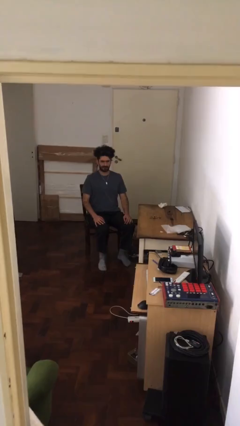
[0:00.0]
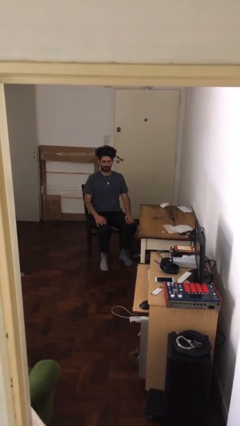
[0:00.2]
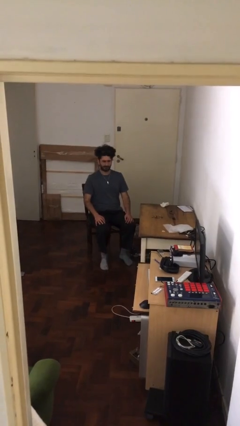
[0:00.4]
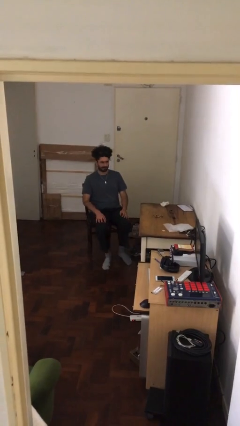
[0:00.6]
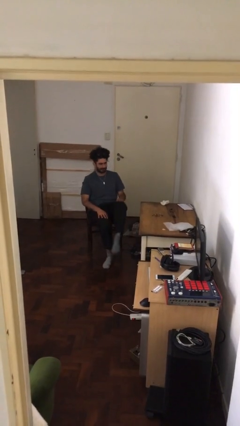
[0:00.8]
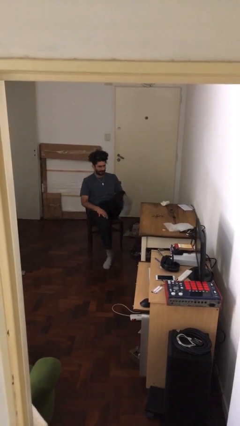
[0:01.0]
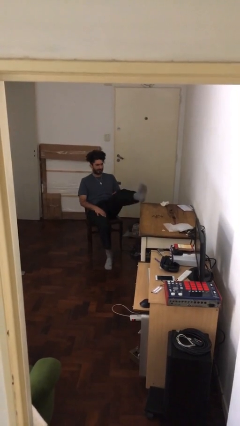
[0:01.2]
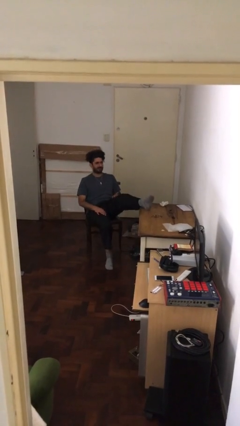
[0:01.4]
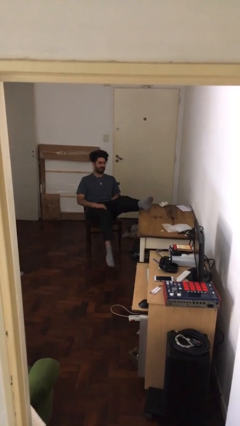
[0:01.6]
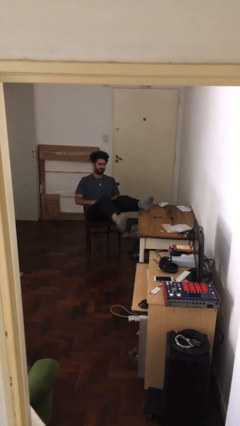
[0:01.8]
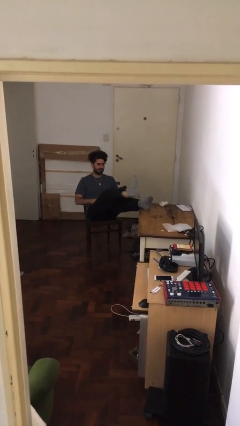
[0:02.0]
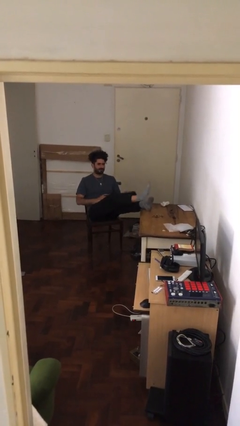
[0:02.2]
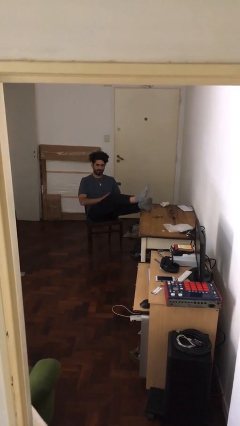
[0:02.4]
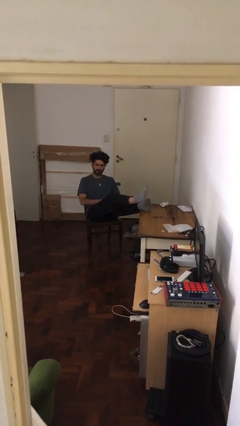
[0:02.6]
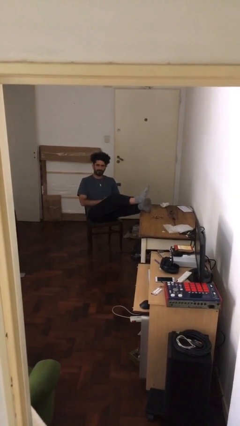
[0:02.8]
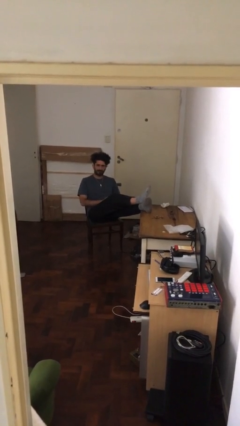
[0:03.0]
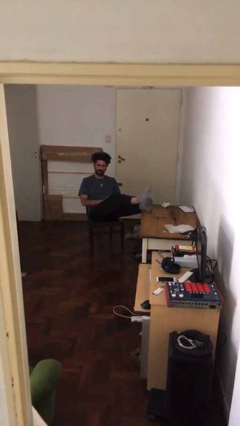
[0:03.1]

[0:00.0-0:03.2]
person puts feet up

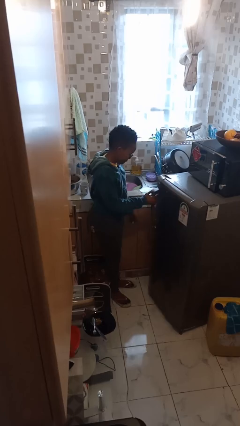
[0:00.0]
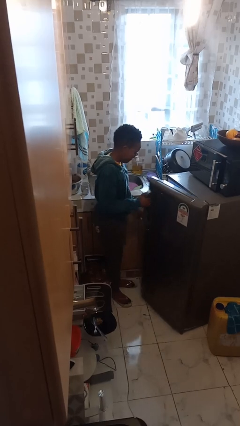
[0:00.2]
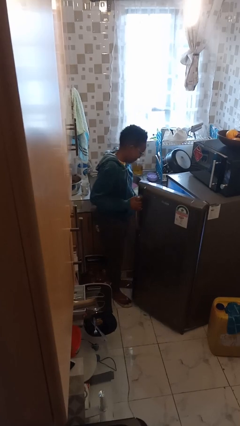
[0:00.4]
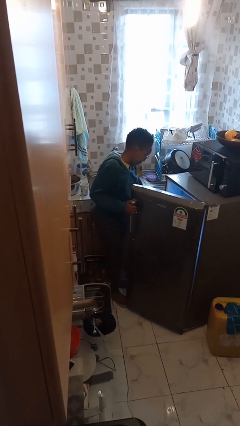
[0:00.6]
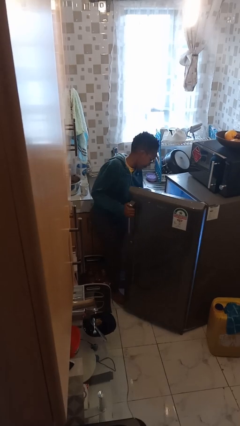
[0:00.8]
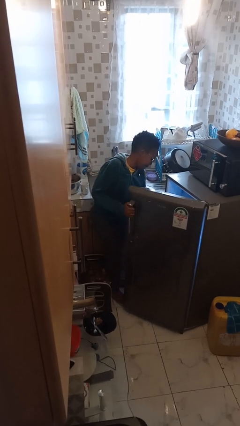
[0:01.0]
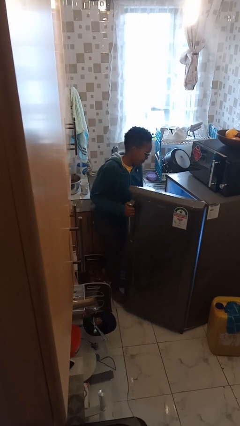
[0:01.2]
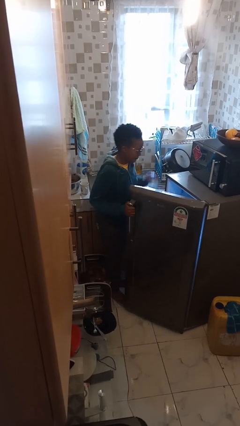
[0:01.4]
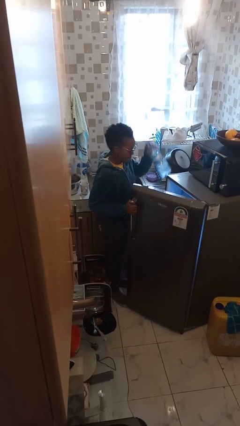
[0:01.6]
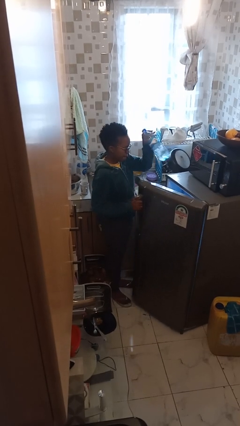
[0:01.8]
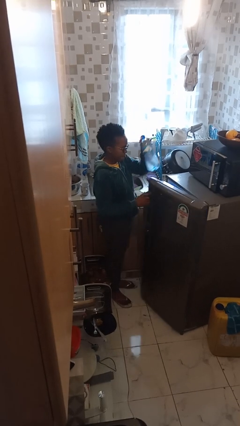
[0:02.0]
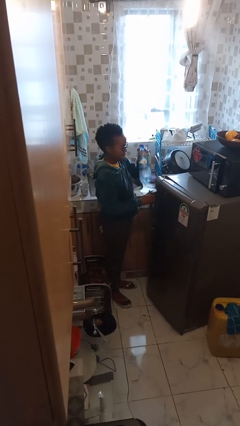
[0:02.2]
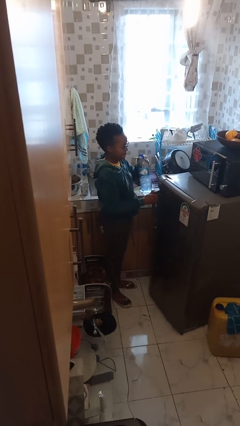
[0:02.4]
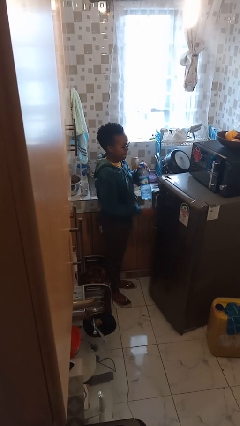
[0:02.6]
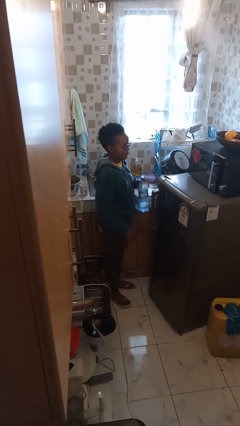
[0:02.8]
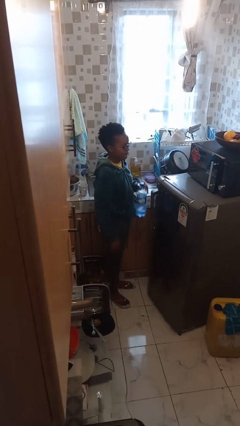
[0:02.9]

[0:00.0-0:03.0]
person takes object from refrigerator

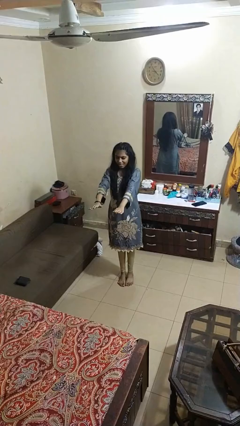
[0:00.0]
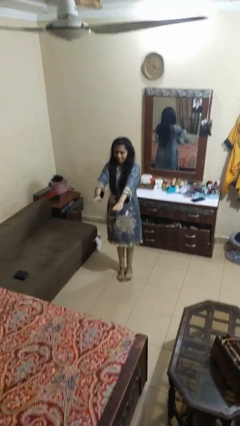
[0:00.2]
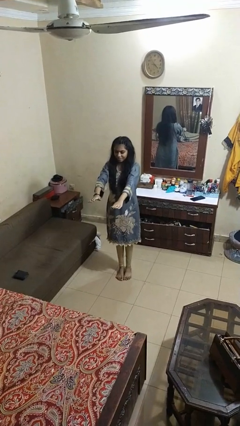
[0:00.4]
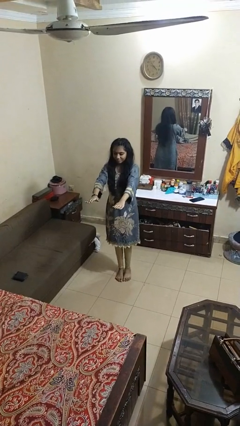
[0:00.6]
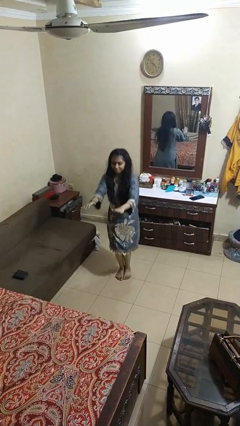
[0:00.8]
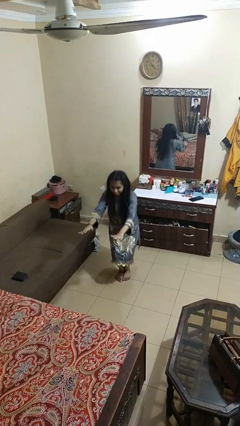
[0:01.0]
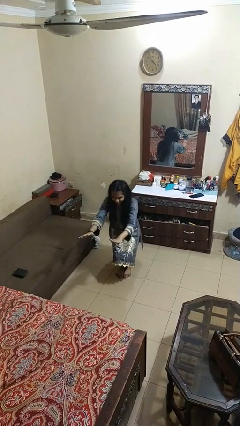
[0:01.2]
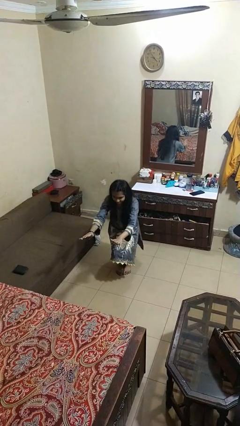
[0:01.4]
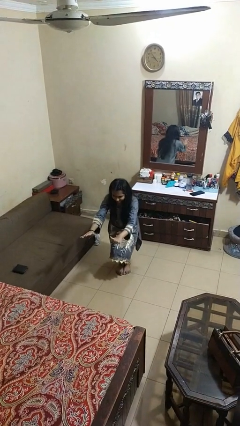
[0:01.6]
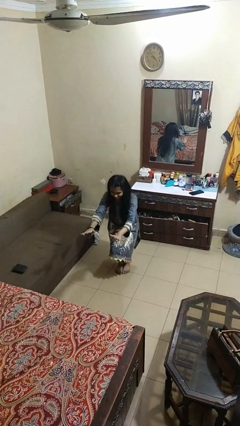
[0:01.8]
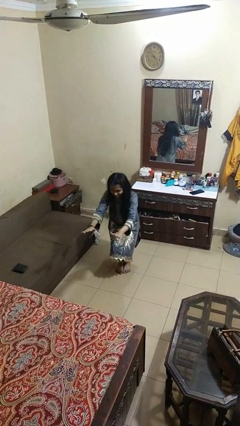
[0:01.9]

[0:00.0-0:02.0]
person squats

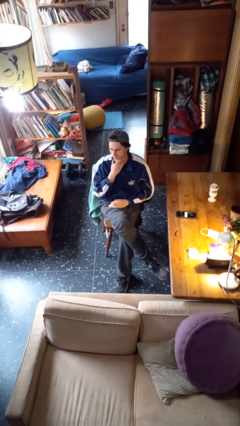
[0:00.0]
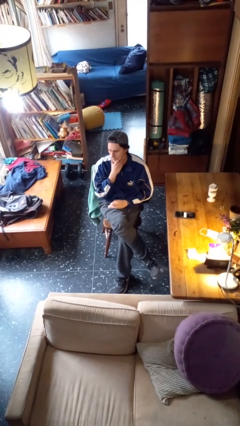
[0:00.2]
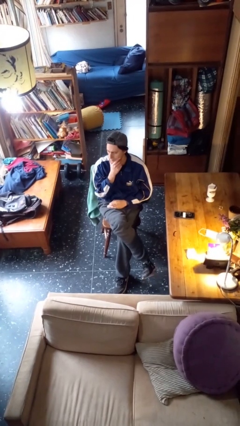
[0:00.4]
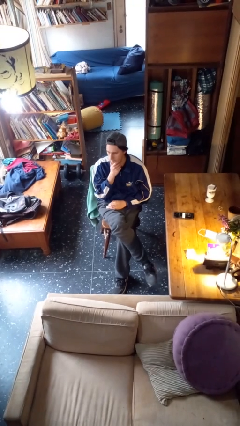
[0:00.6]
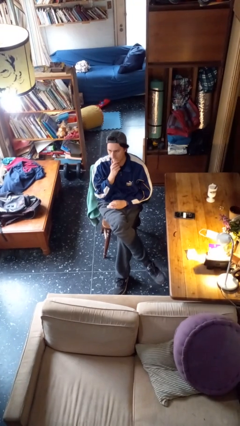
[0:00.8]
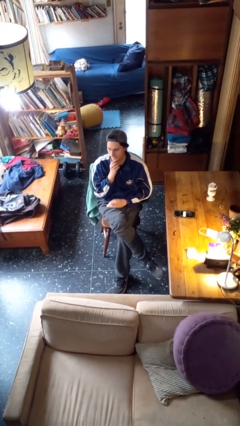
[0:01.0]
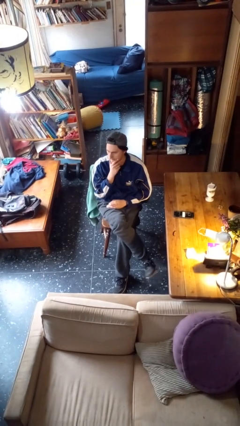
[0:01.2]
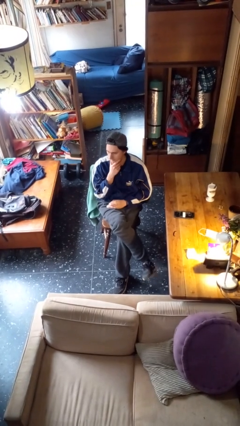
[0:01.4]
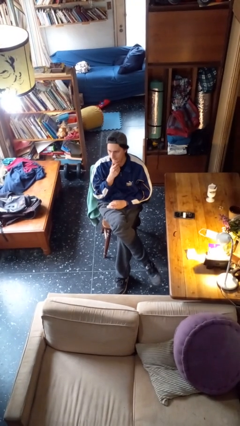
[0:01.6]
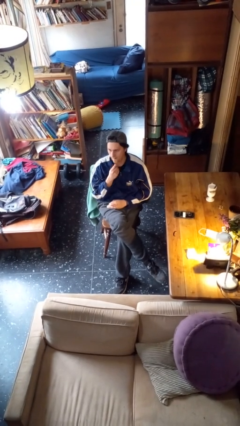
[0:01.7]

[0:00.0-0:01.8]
person strokes chin

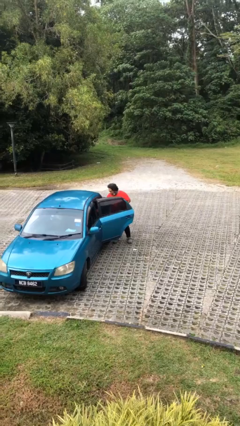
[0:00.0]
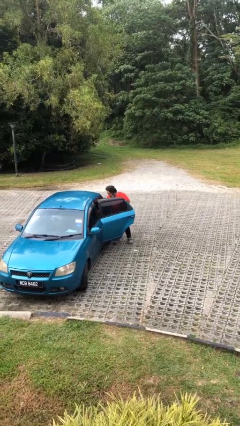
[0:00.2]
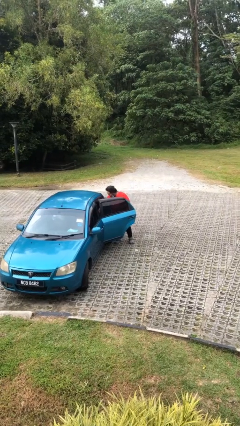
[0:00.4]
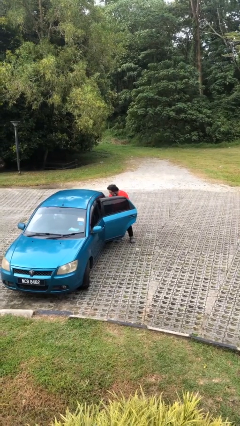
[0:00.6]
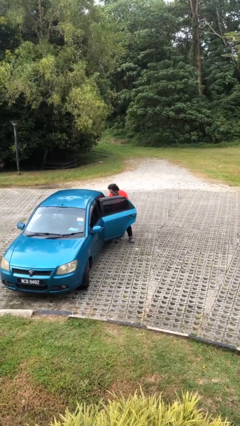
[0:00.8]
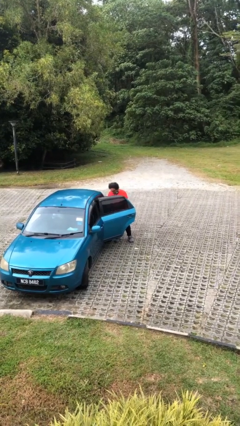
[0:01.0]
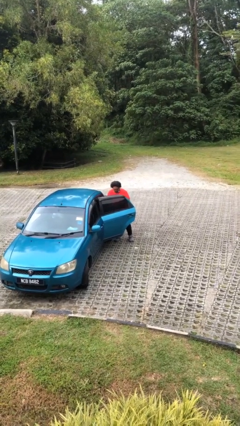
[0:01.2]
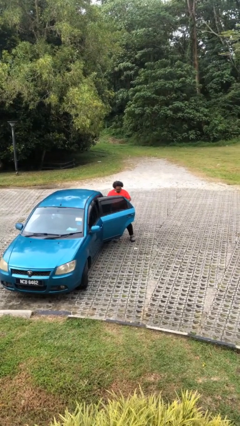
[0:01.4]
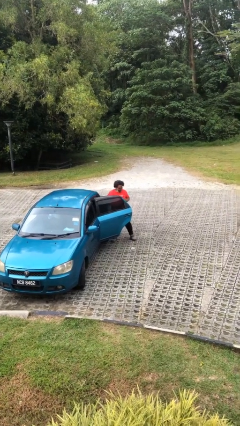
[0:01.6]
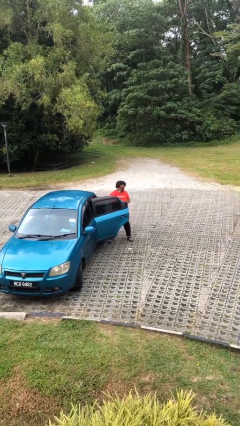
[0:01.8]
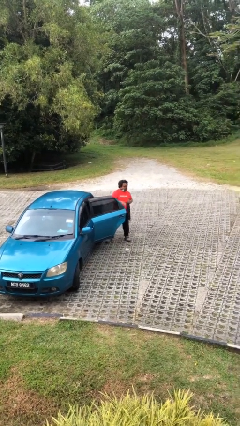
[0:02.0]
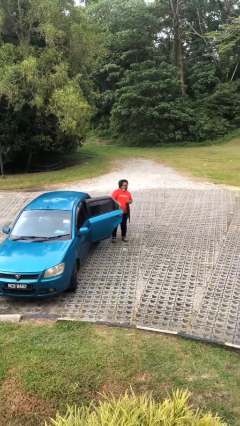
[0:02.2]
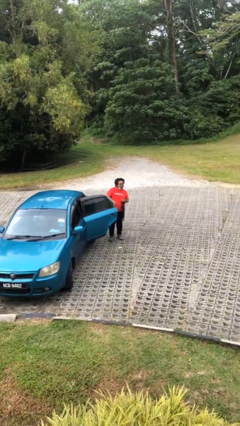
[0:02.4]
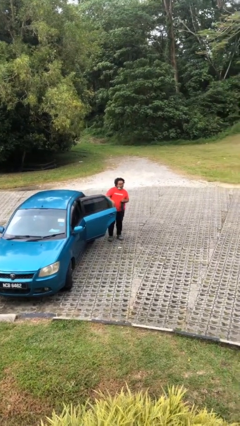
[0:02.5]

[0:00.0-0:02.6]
person unloads car

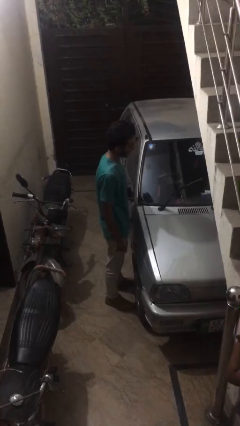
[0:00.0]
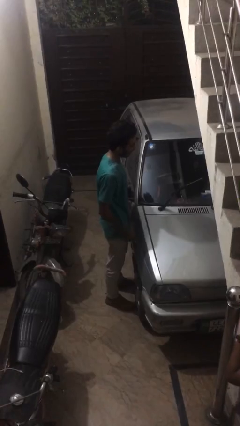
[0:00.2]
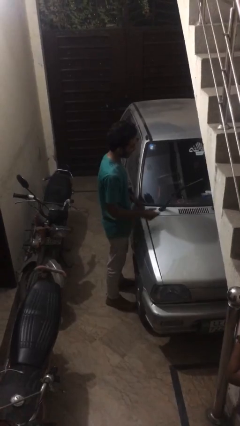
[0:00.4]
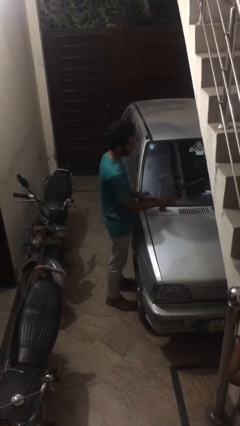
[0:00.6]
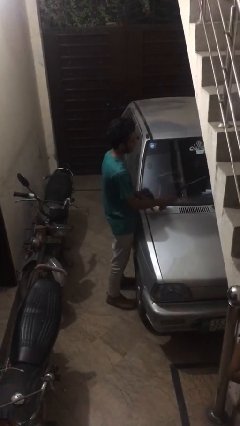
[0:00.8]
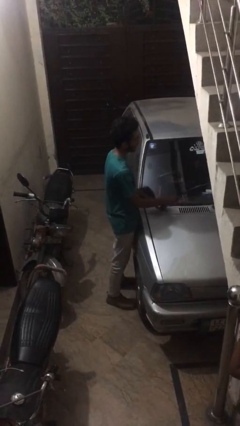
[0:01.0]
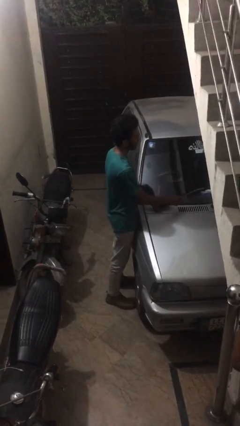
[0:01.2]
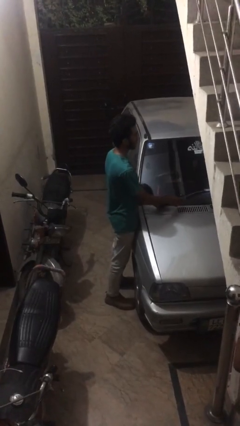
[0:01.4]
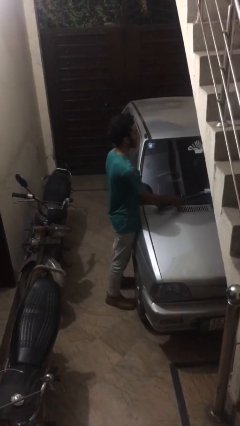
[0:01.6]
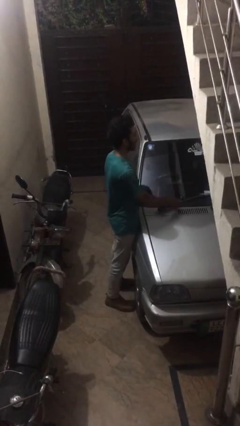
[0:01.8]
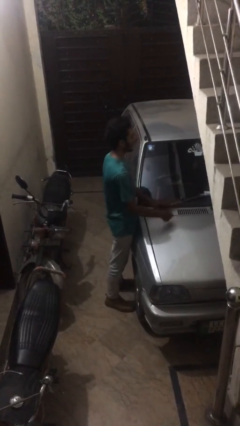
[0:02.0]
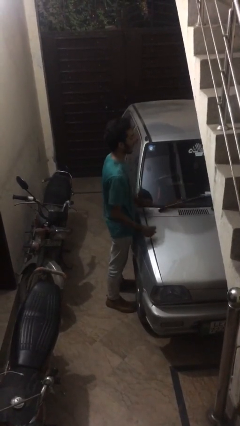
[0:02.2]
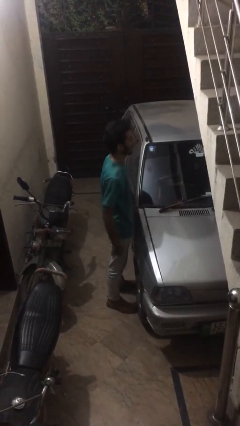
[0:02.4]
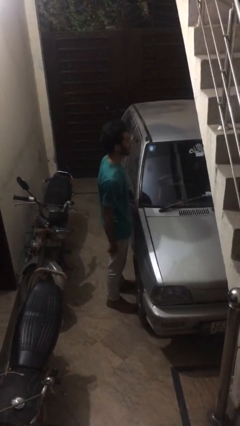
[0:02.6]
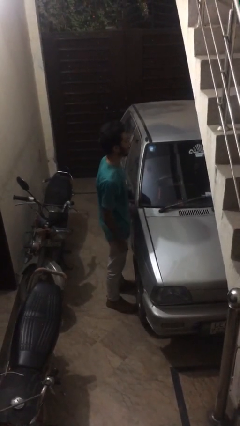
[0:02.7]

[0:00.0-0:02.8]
person flips down car wipers

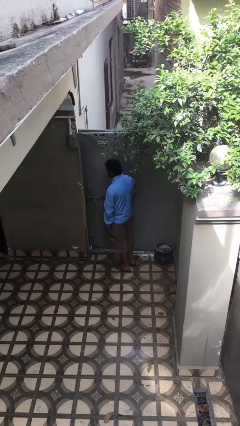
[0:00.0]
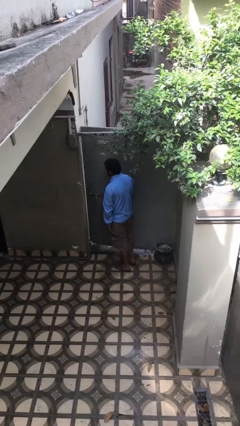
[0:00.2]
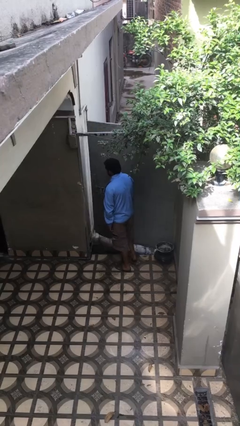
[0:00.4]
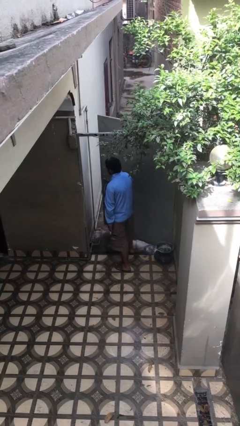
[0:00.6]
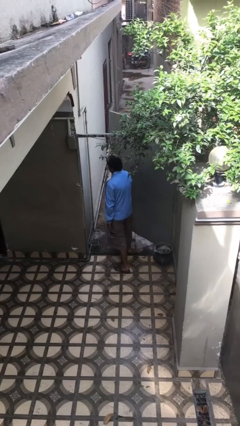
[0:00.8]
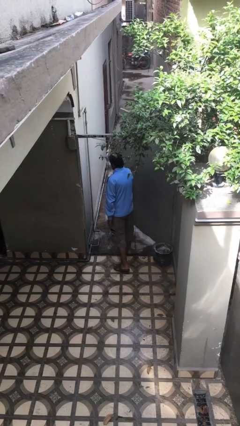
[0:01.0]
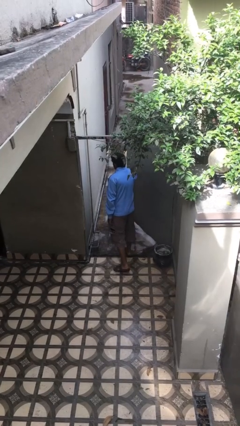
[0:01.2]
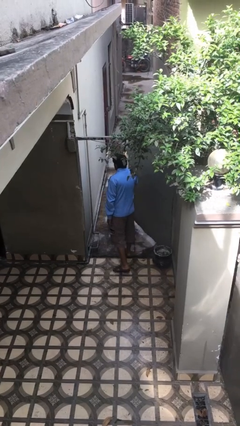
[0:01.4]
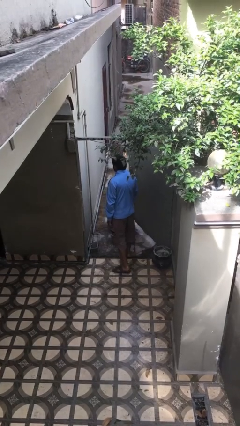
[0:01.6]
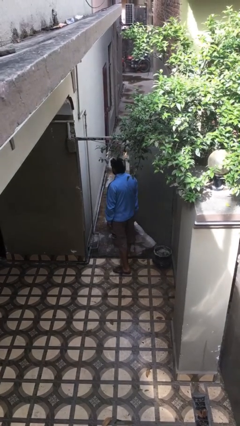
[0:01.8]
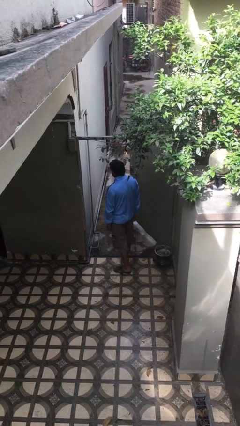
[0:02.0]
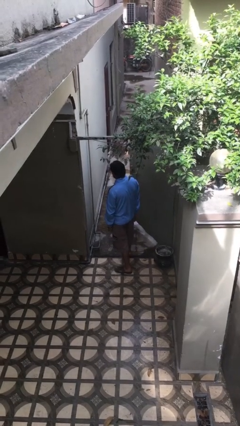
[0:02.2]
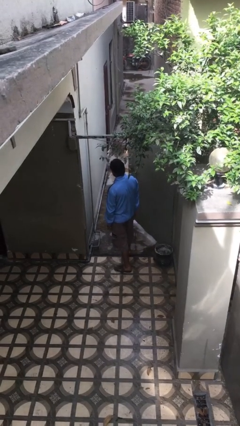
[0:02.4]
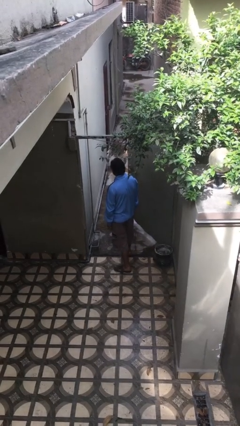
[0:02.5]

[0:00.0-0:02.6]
person opens facility door
